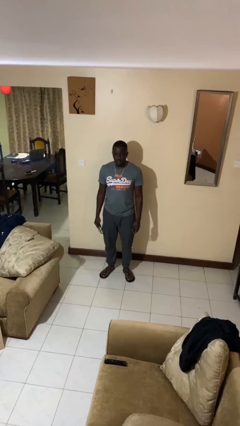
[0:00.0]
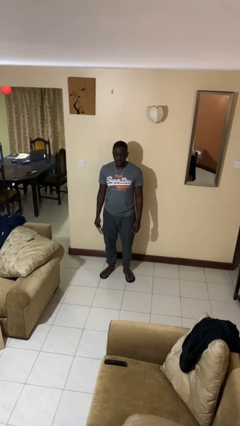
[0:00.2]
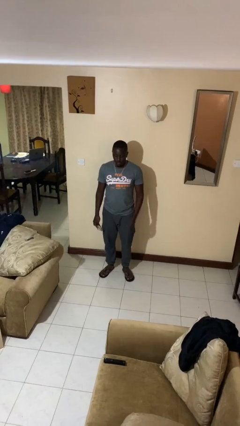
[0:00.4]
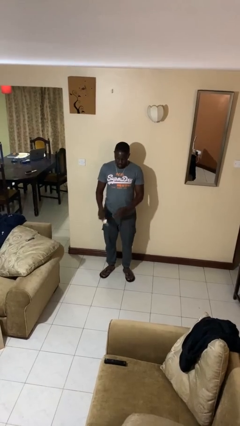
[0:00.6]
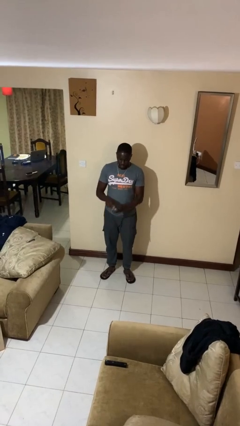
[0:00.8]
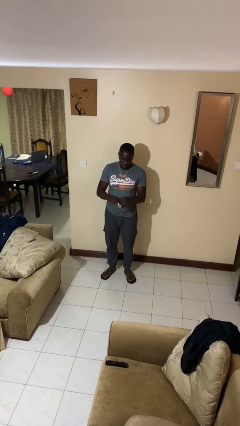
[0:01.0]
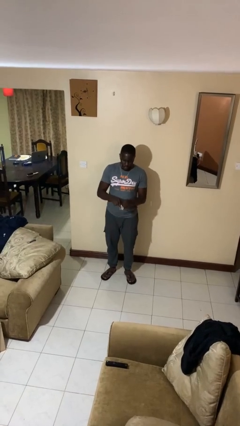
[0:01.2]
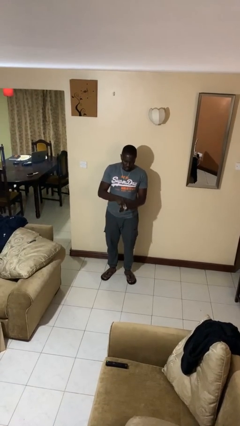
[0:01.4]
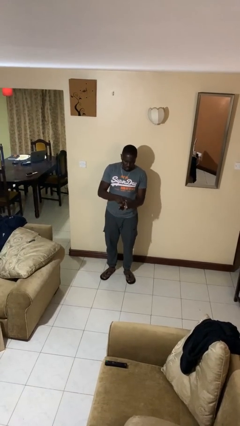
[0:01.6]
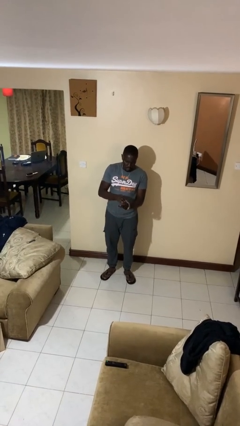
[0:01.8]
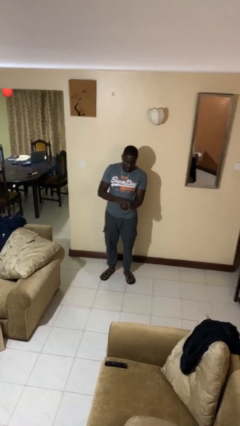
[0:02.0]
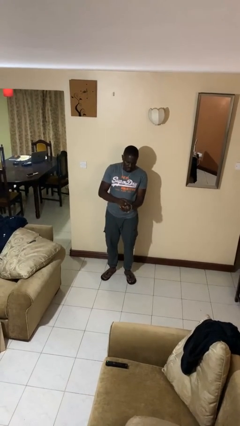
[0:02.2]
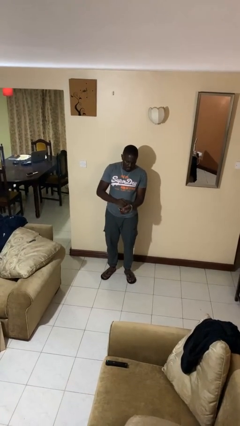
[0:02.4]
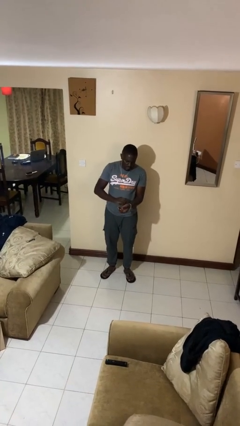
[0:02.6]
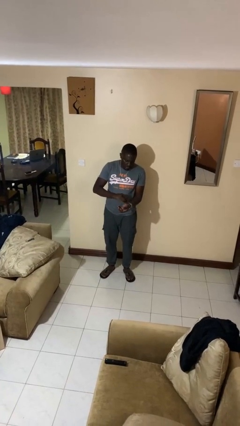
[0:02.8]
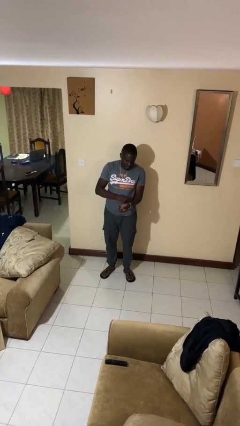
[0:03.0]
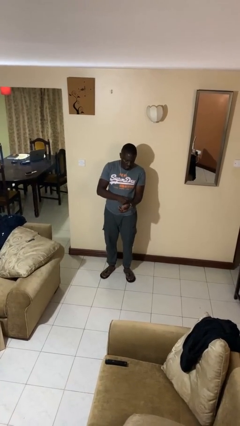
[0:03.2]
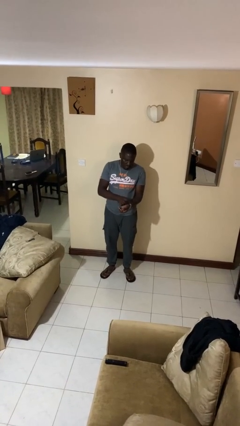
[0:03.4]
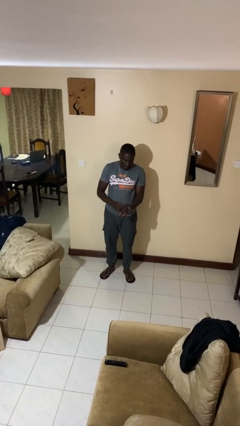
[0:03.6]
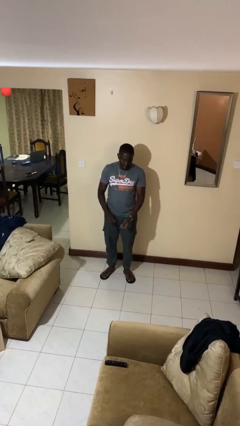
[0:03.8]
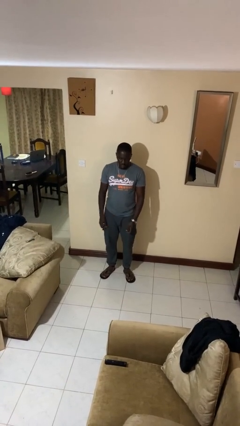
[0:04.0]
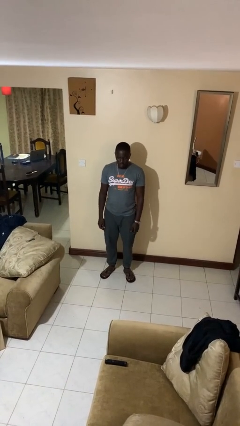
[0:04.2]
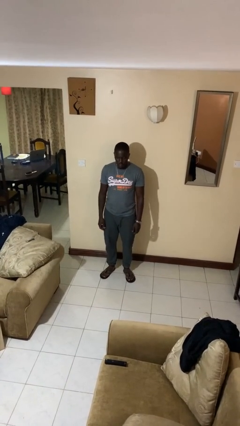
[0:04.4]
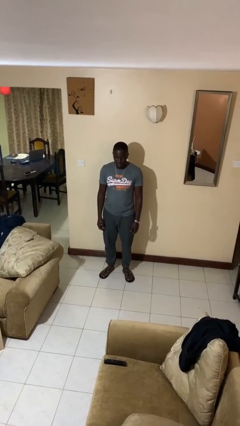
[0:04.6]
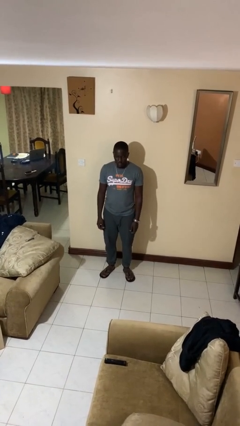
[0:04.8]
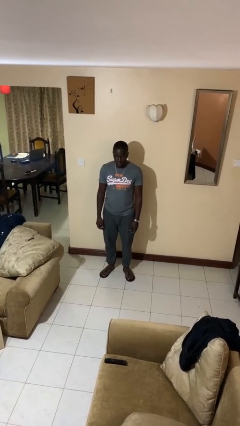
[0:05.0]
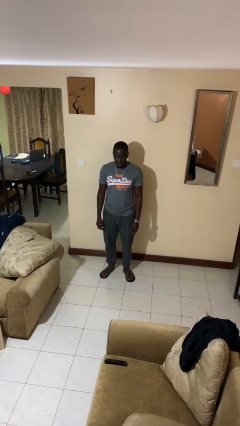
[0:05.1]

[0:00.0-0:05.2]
person puts on wristwatch

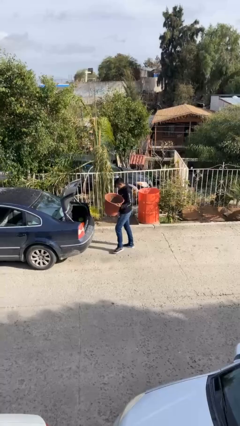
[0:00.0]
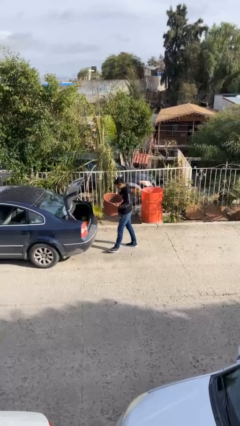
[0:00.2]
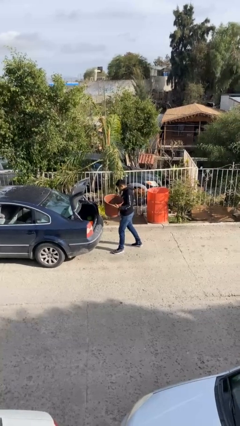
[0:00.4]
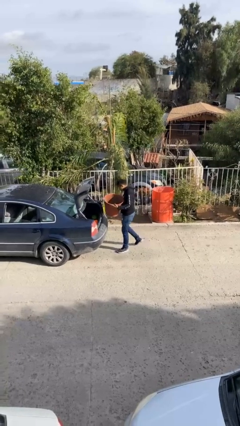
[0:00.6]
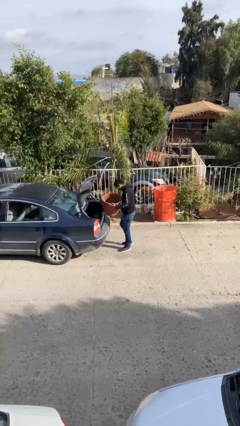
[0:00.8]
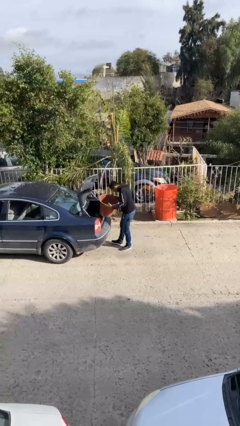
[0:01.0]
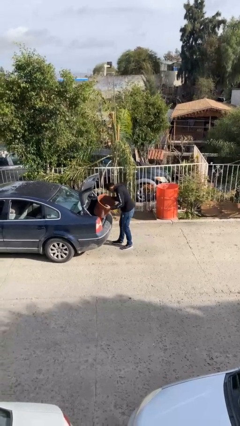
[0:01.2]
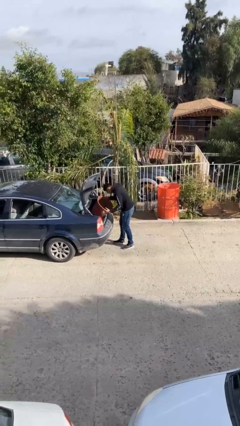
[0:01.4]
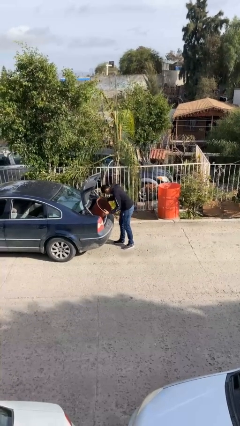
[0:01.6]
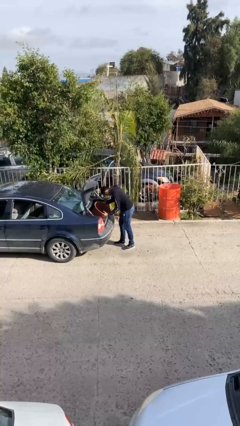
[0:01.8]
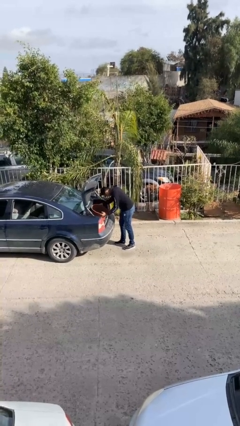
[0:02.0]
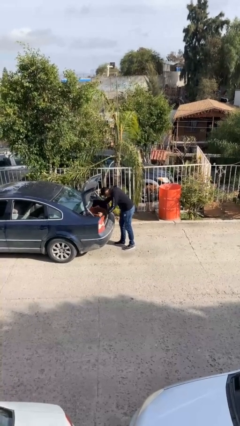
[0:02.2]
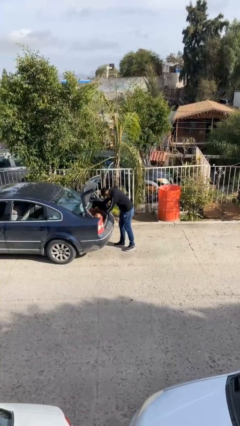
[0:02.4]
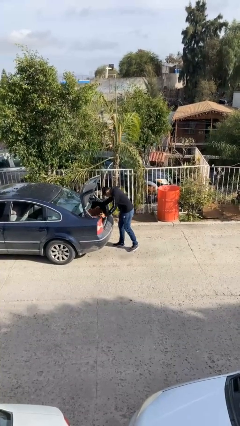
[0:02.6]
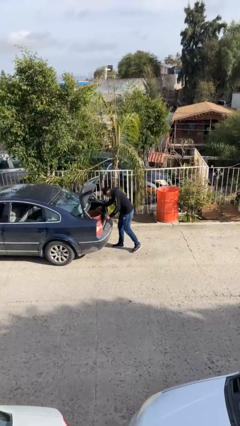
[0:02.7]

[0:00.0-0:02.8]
person loads car

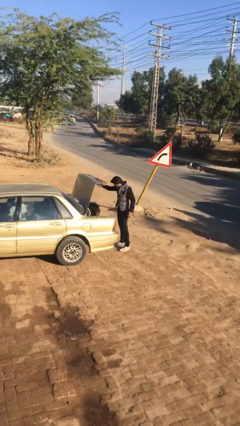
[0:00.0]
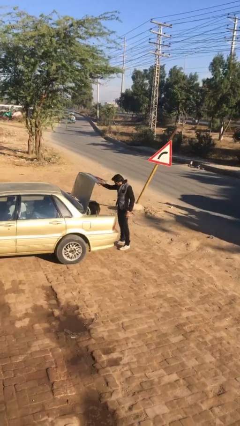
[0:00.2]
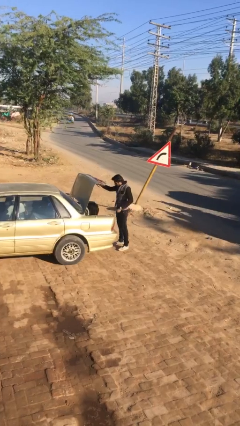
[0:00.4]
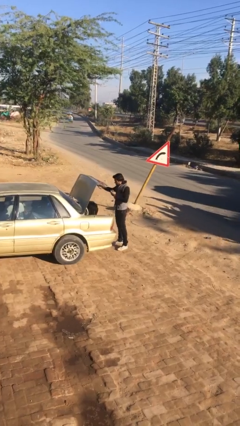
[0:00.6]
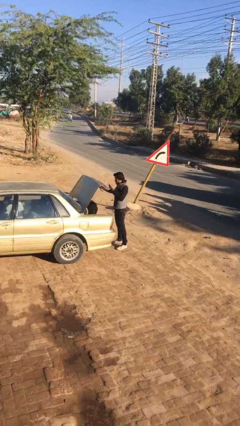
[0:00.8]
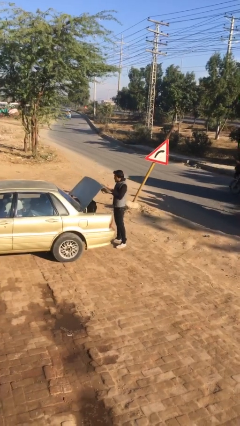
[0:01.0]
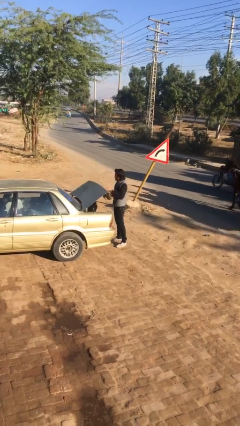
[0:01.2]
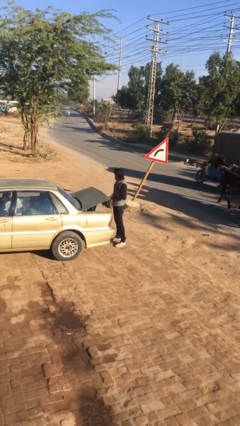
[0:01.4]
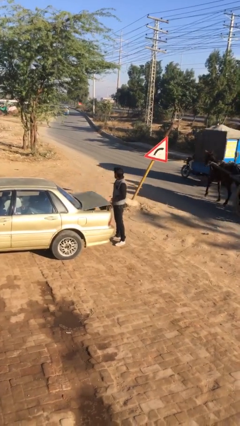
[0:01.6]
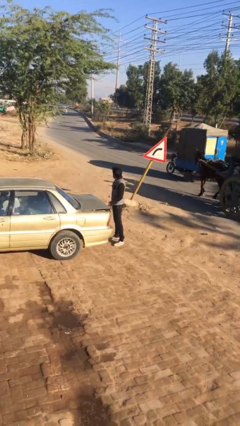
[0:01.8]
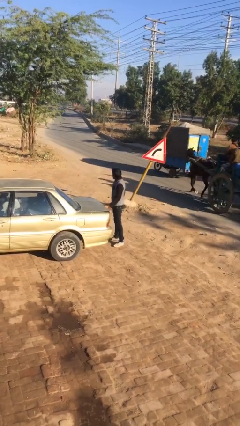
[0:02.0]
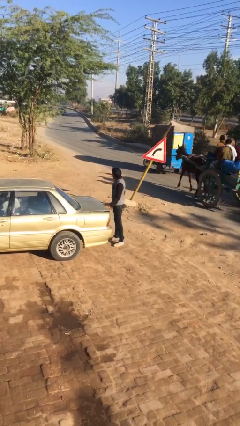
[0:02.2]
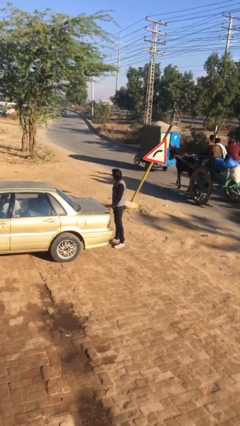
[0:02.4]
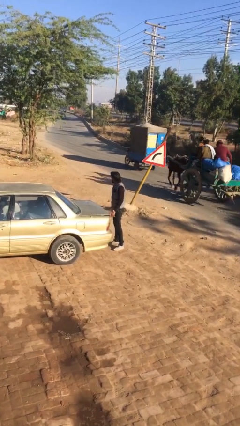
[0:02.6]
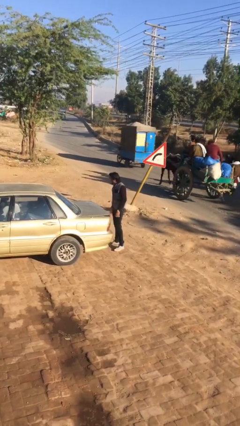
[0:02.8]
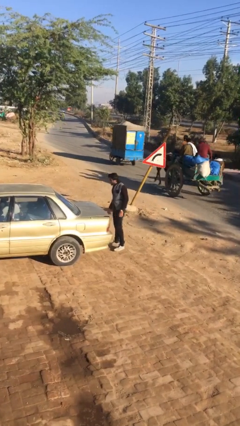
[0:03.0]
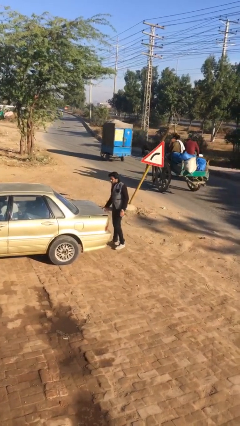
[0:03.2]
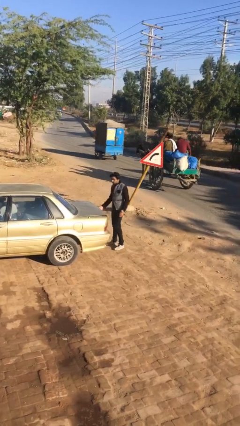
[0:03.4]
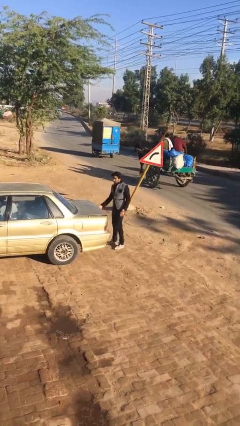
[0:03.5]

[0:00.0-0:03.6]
person closes car trunk

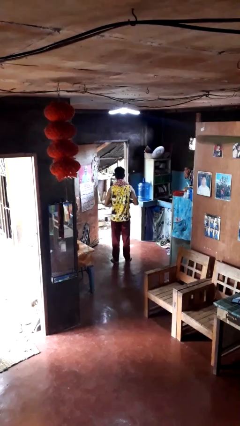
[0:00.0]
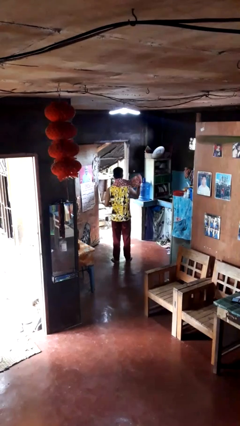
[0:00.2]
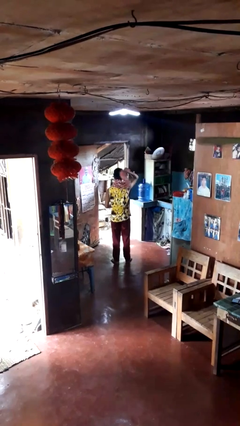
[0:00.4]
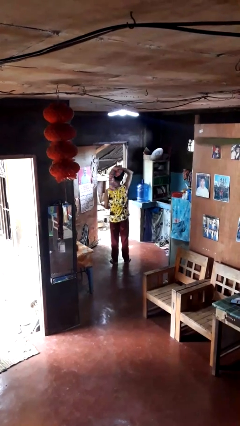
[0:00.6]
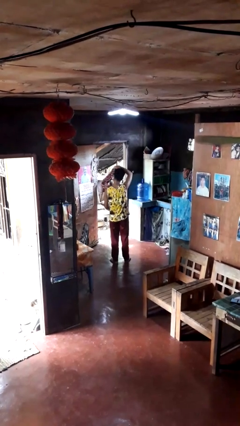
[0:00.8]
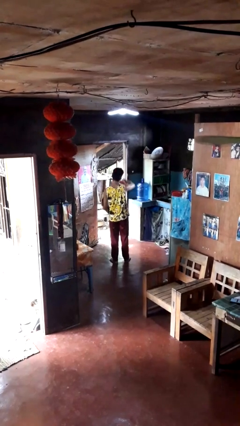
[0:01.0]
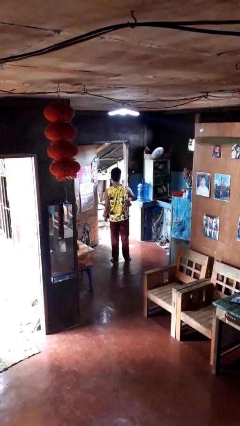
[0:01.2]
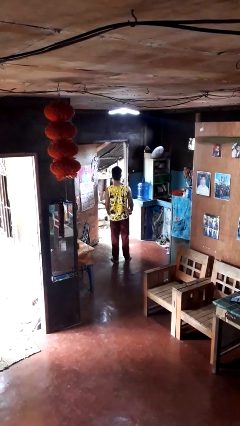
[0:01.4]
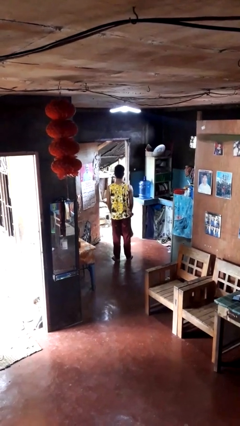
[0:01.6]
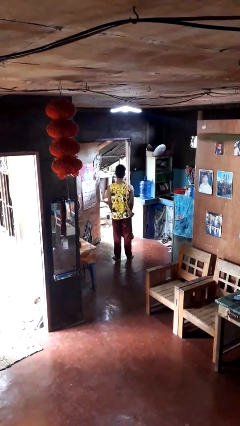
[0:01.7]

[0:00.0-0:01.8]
person takes off scarf
